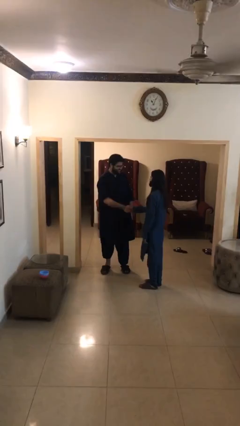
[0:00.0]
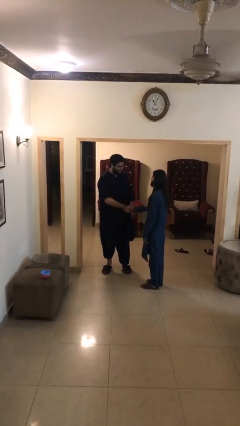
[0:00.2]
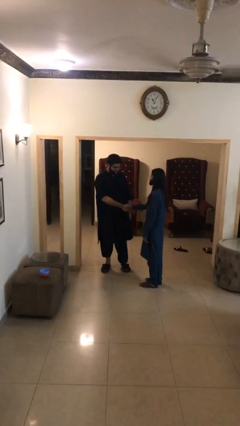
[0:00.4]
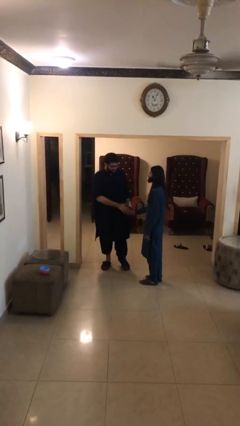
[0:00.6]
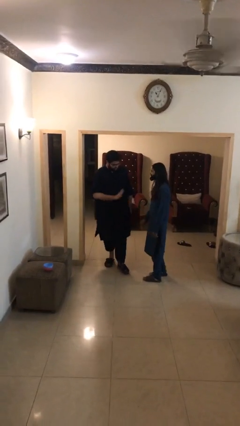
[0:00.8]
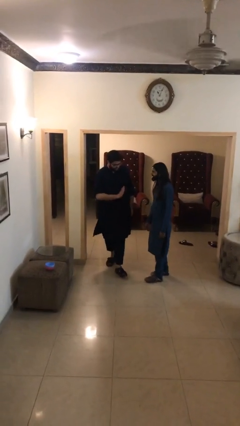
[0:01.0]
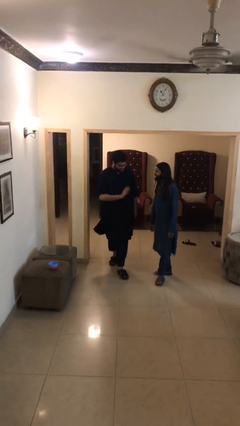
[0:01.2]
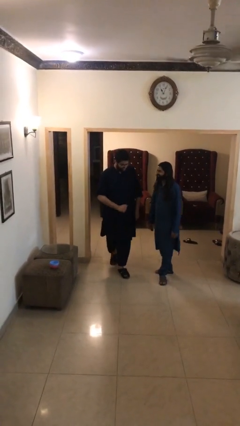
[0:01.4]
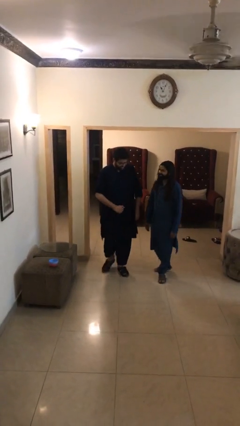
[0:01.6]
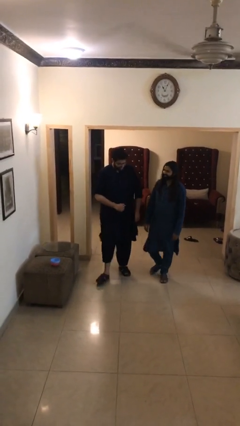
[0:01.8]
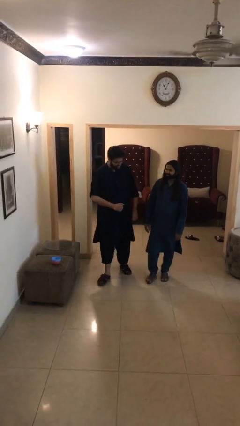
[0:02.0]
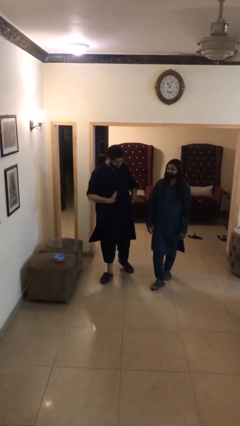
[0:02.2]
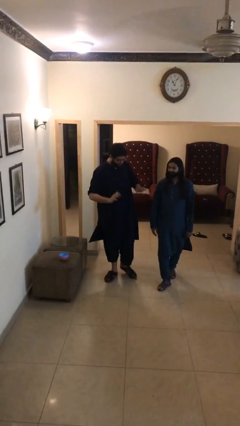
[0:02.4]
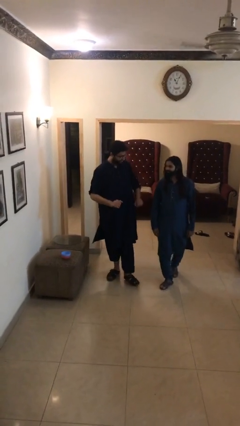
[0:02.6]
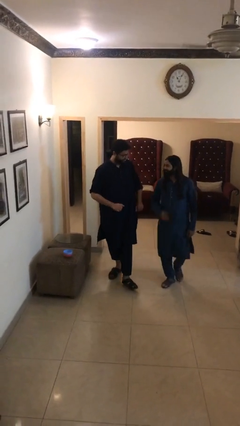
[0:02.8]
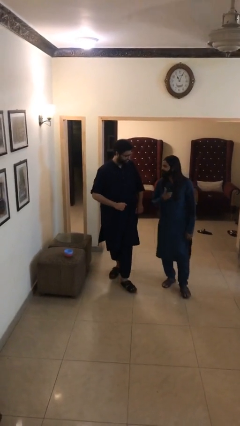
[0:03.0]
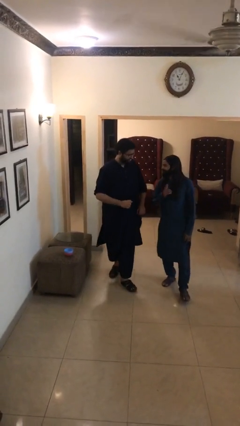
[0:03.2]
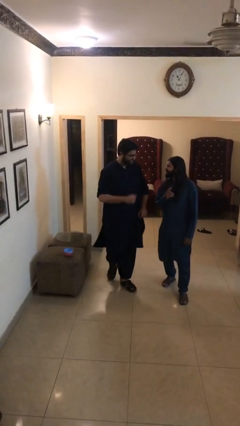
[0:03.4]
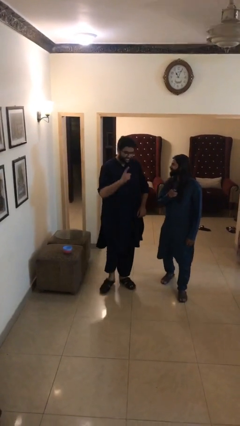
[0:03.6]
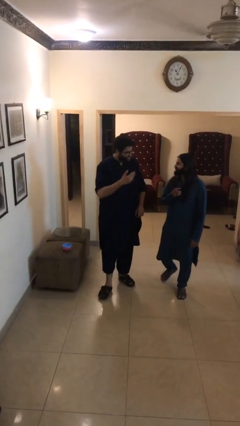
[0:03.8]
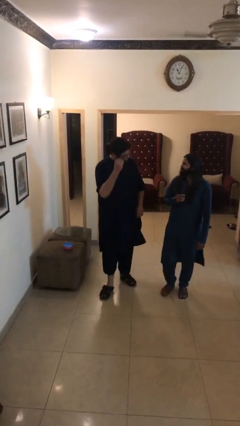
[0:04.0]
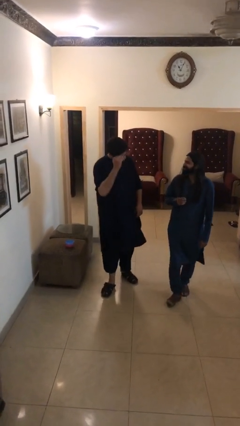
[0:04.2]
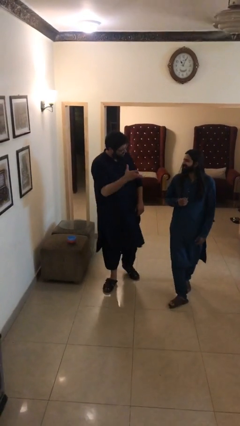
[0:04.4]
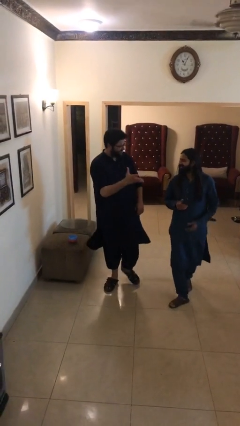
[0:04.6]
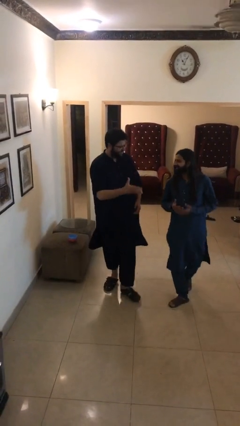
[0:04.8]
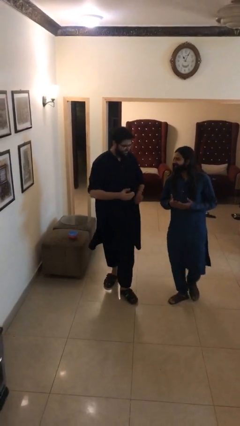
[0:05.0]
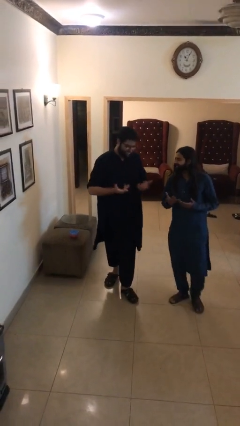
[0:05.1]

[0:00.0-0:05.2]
person talks to person

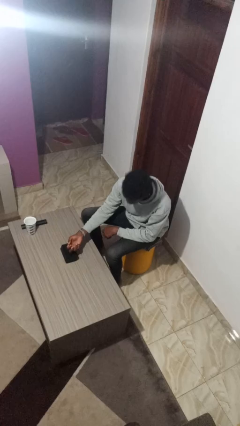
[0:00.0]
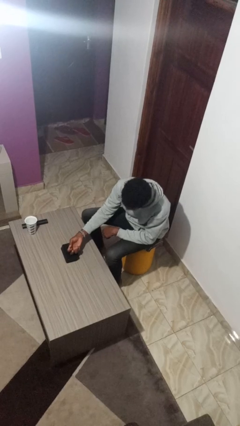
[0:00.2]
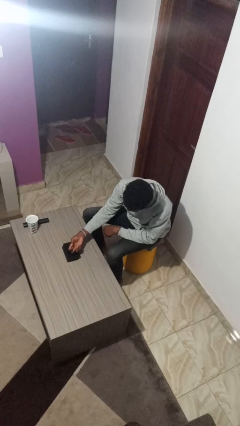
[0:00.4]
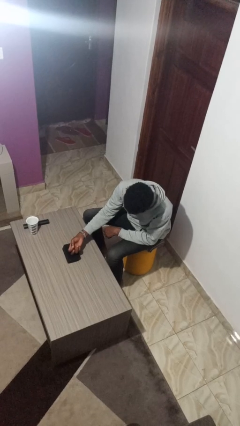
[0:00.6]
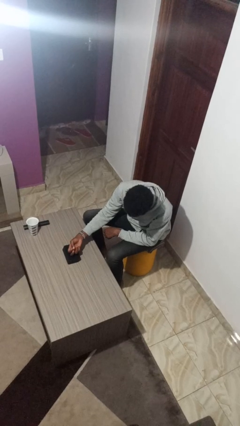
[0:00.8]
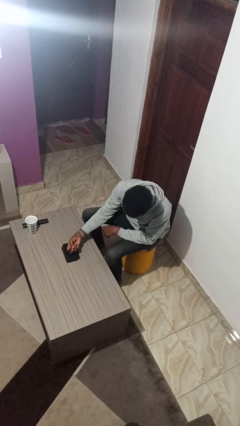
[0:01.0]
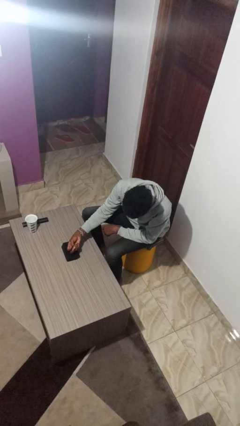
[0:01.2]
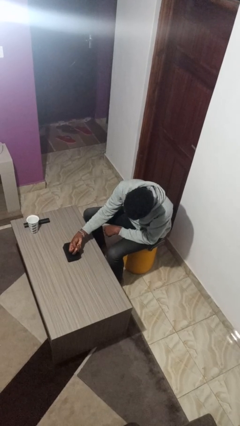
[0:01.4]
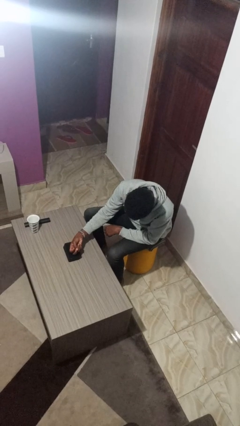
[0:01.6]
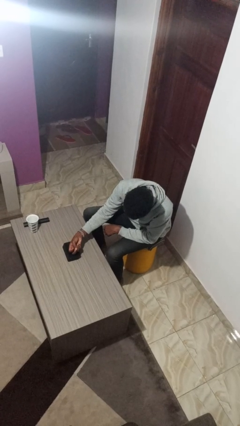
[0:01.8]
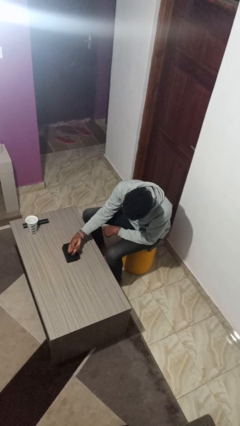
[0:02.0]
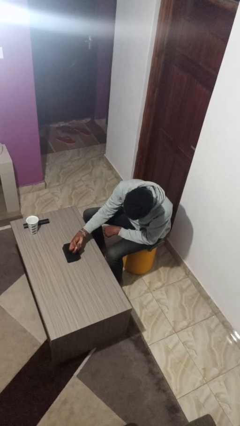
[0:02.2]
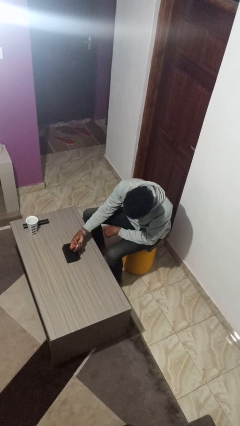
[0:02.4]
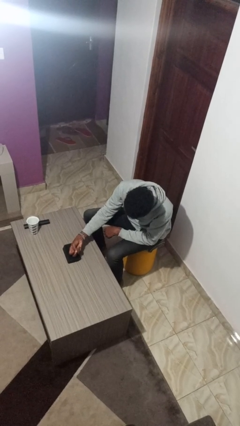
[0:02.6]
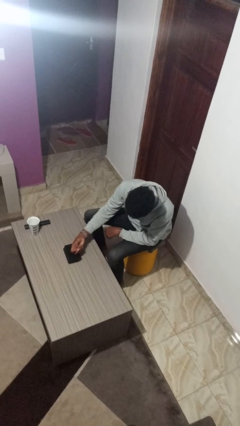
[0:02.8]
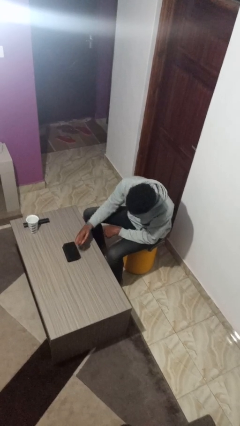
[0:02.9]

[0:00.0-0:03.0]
person taps object with finger

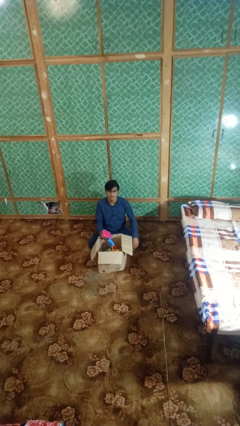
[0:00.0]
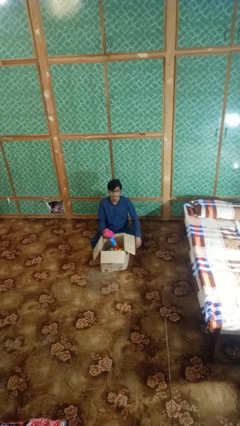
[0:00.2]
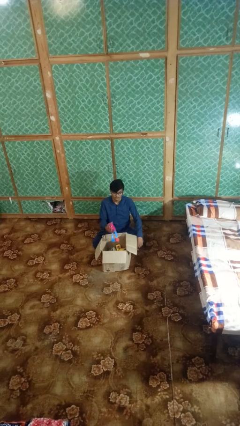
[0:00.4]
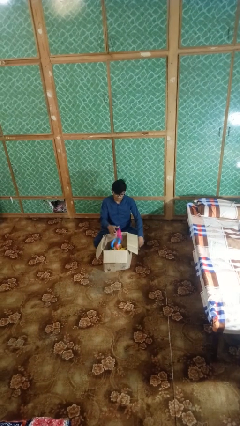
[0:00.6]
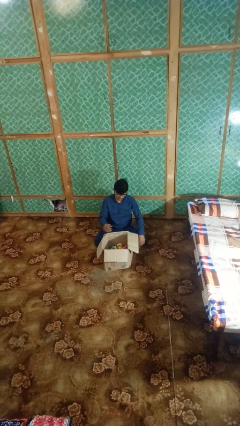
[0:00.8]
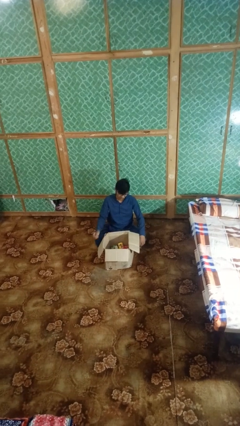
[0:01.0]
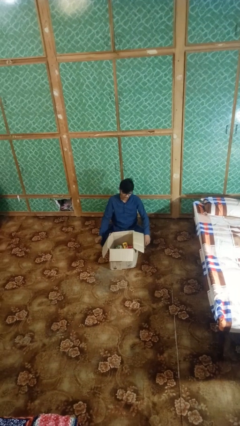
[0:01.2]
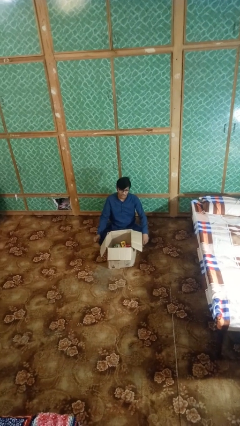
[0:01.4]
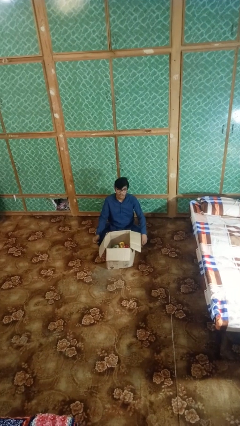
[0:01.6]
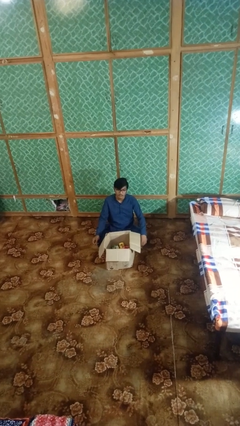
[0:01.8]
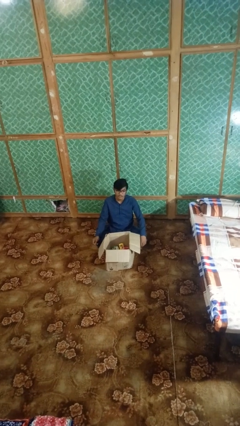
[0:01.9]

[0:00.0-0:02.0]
person puts object into box

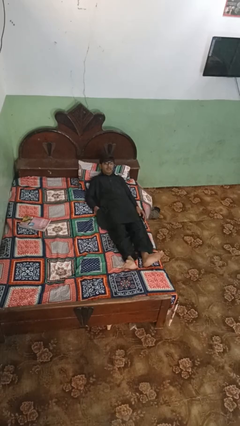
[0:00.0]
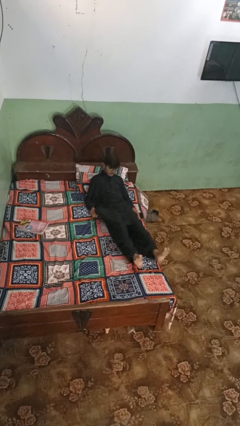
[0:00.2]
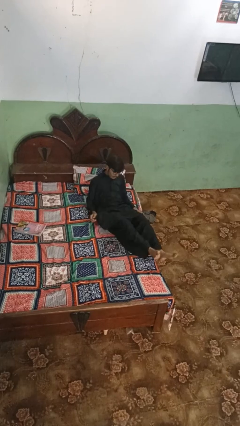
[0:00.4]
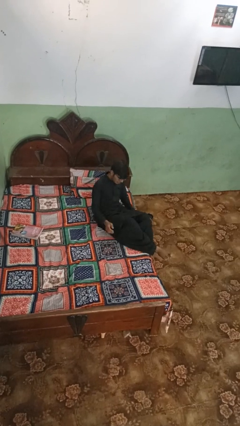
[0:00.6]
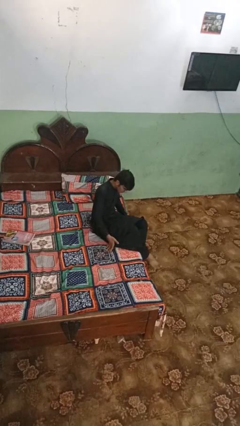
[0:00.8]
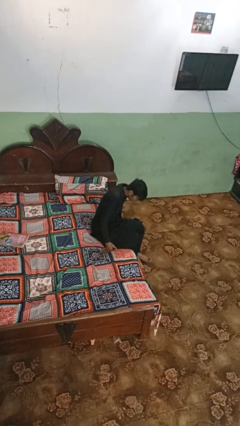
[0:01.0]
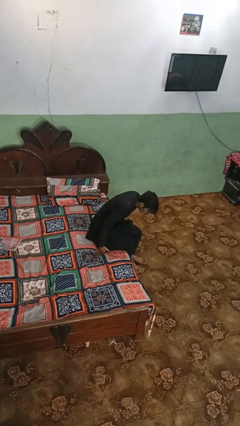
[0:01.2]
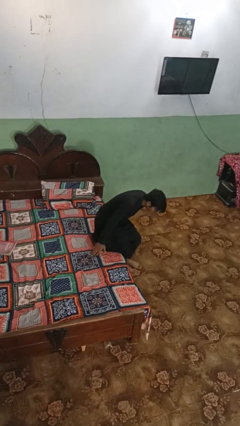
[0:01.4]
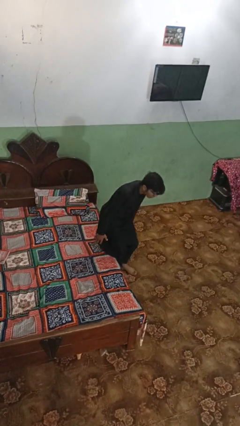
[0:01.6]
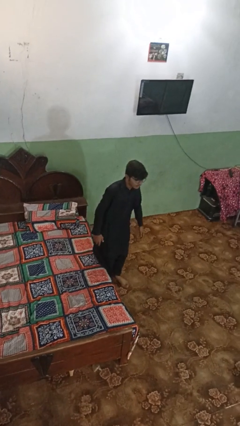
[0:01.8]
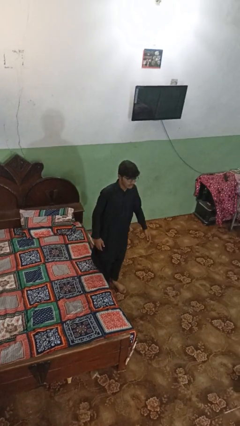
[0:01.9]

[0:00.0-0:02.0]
person stands up

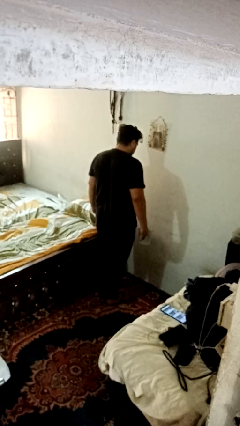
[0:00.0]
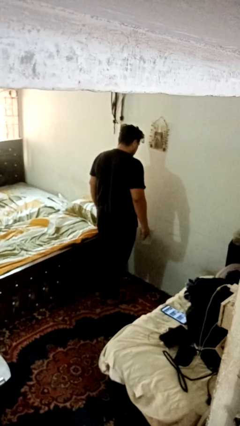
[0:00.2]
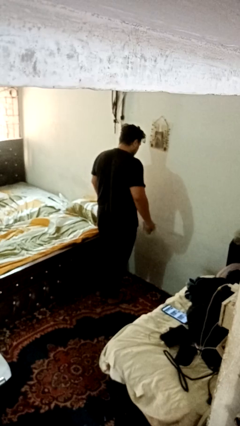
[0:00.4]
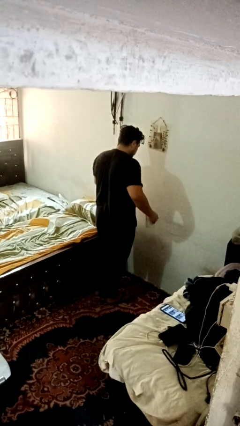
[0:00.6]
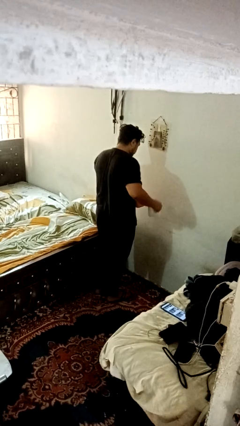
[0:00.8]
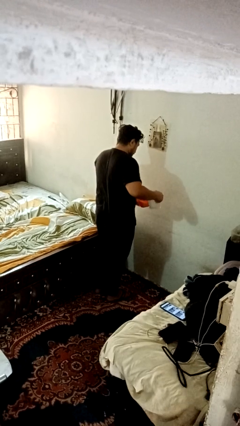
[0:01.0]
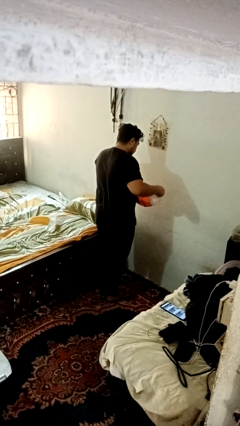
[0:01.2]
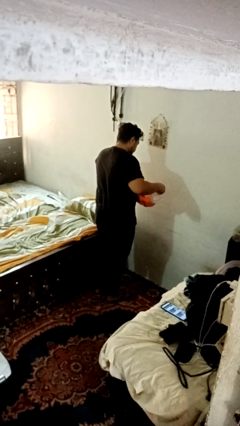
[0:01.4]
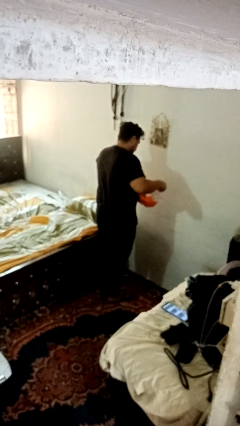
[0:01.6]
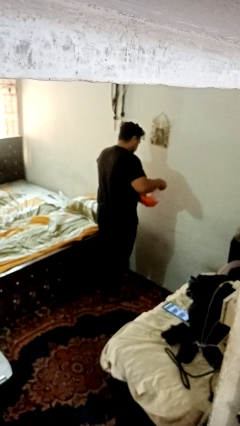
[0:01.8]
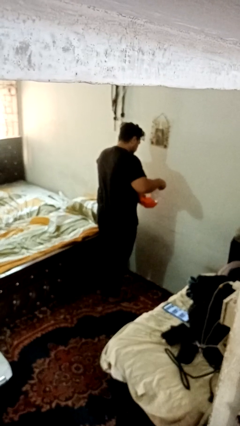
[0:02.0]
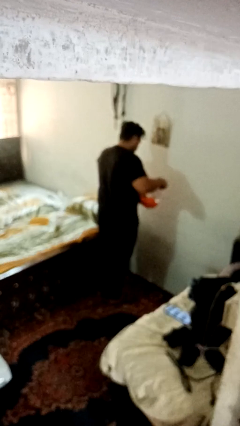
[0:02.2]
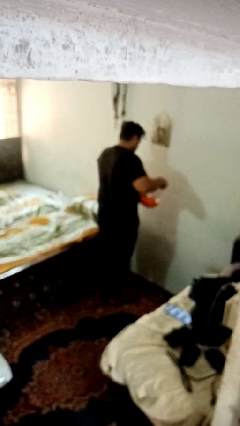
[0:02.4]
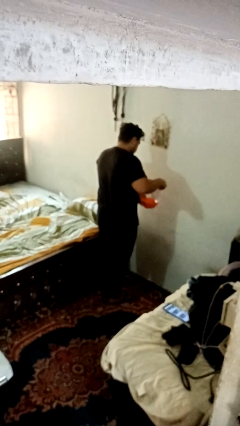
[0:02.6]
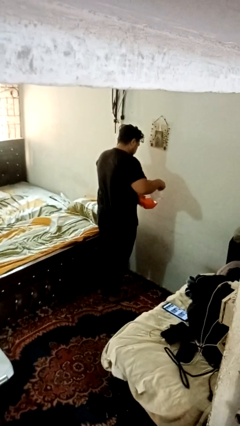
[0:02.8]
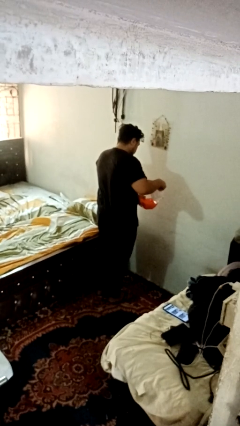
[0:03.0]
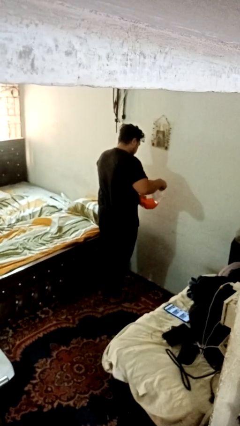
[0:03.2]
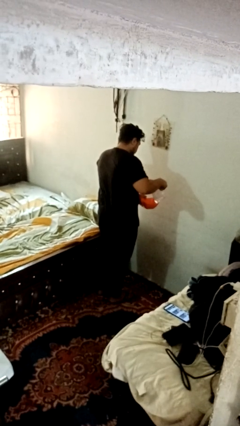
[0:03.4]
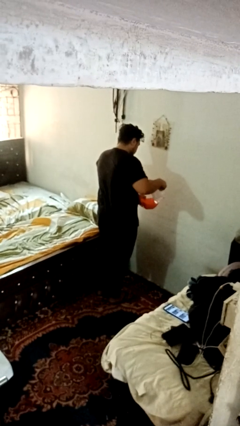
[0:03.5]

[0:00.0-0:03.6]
person pours into bowl

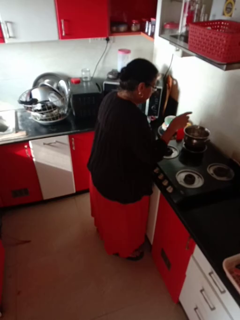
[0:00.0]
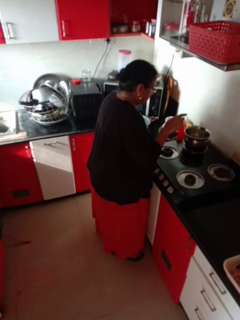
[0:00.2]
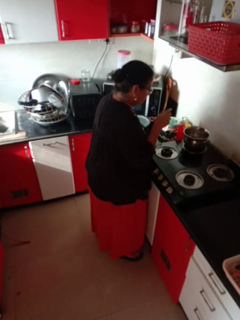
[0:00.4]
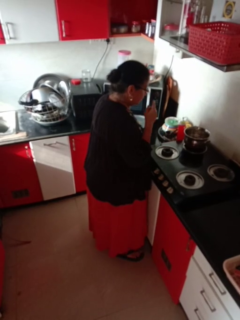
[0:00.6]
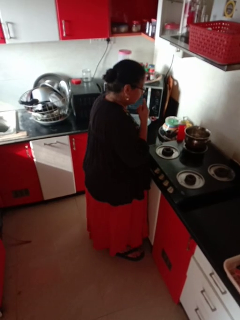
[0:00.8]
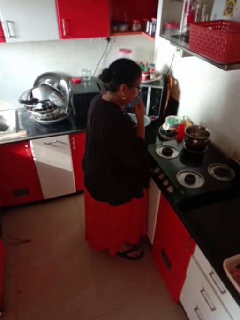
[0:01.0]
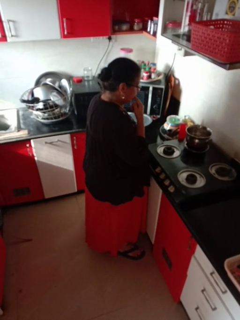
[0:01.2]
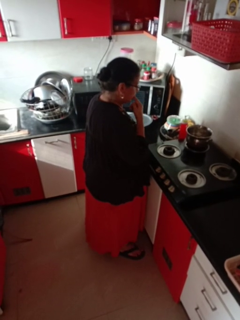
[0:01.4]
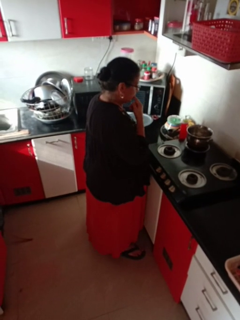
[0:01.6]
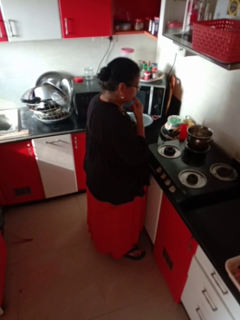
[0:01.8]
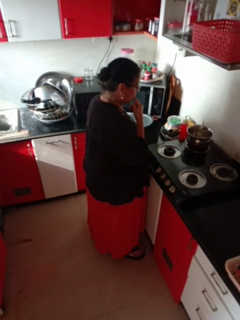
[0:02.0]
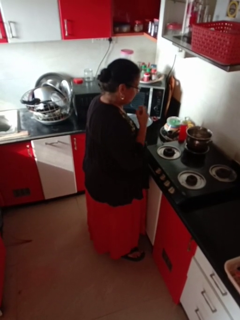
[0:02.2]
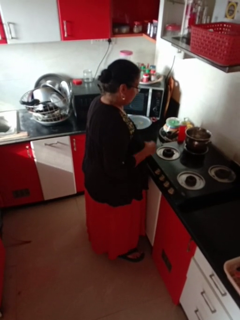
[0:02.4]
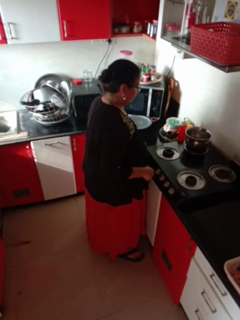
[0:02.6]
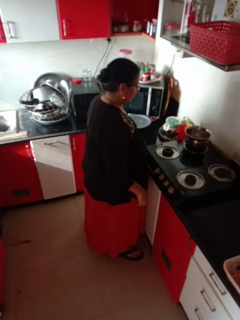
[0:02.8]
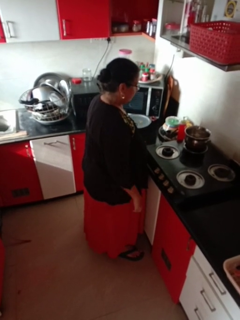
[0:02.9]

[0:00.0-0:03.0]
person burns hand
